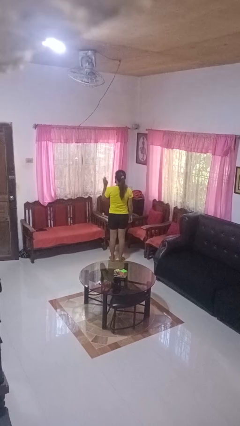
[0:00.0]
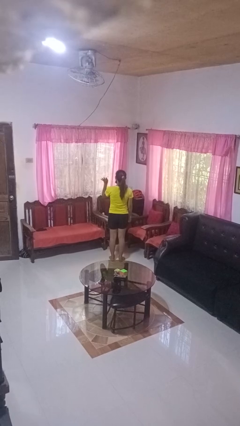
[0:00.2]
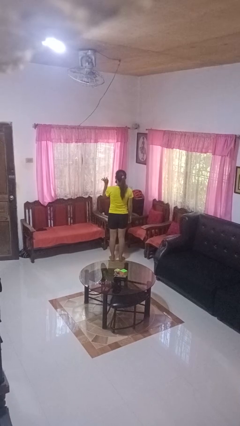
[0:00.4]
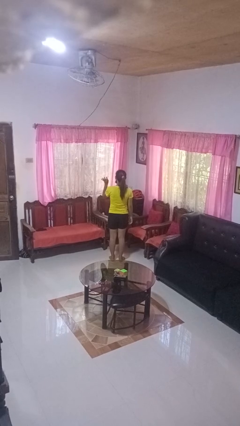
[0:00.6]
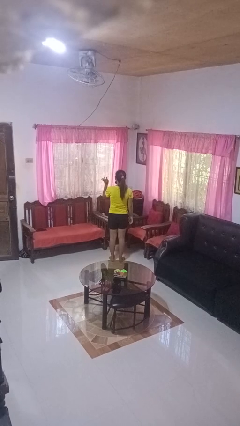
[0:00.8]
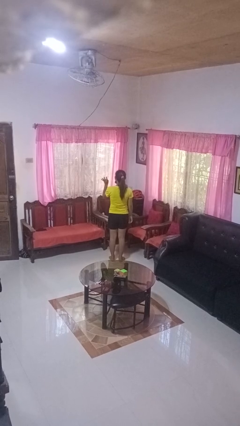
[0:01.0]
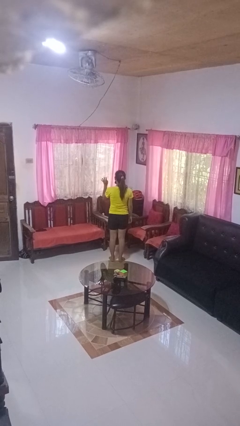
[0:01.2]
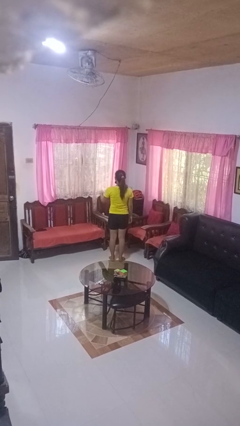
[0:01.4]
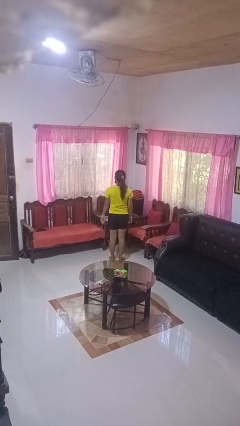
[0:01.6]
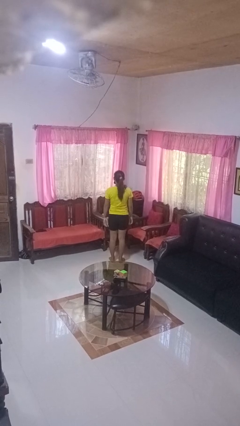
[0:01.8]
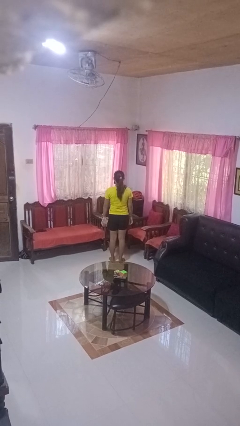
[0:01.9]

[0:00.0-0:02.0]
person gestures number four

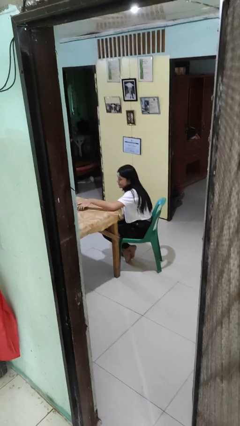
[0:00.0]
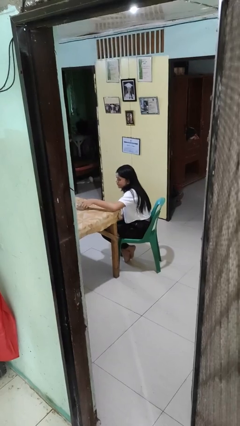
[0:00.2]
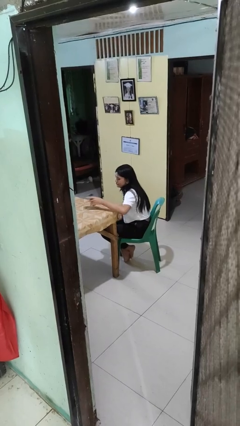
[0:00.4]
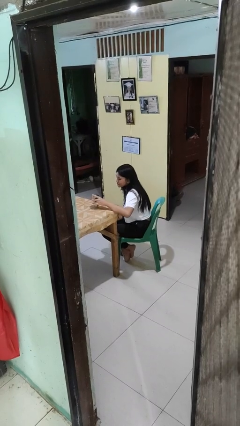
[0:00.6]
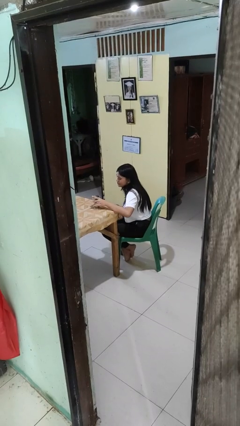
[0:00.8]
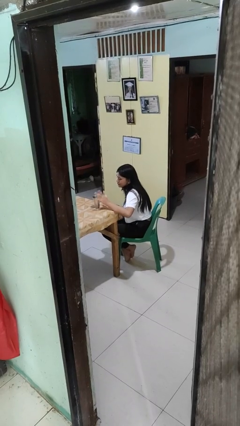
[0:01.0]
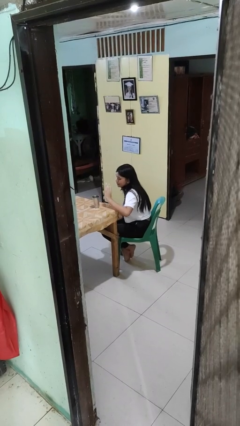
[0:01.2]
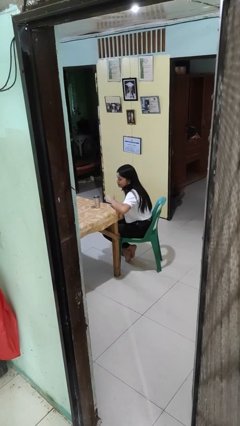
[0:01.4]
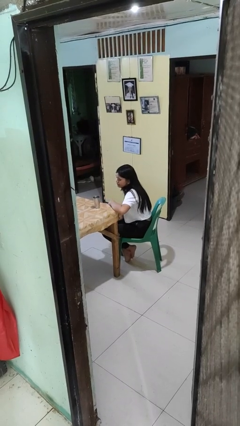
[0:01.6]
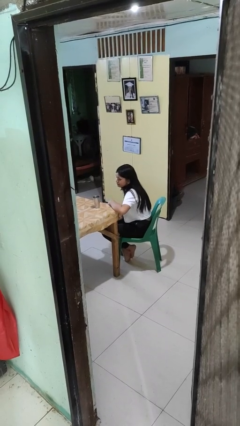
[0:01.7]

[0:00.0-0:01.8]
person sets upright glass

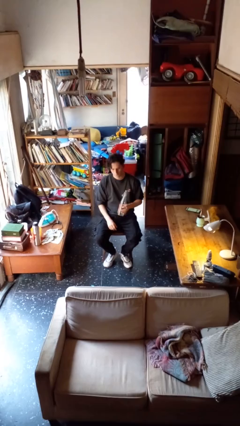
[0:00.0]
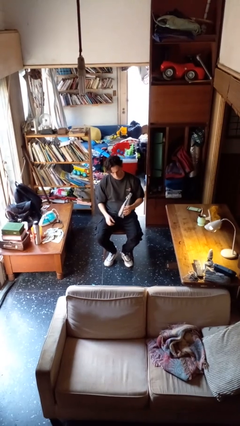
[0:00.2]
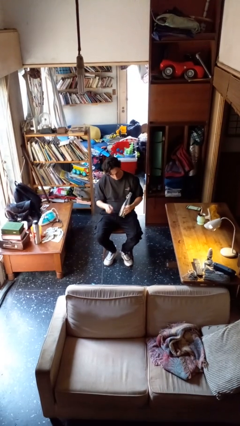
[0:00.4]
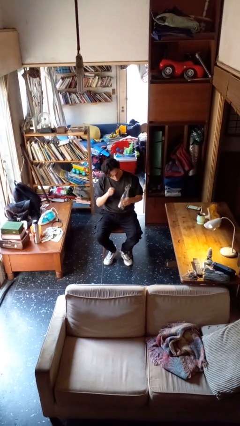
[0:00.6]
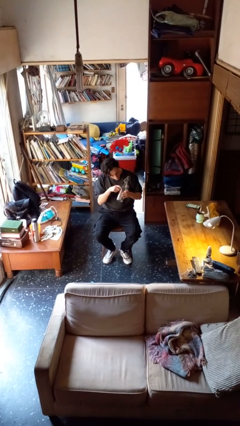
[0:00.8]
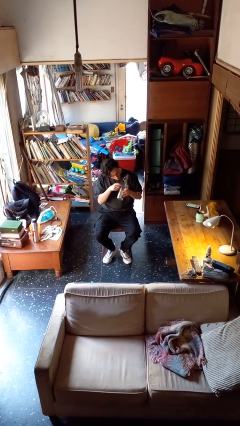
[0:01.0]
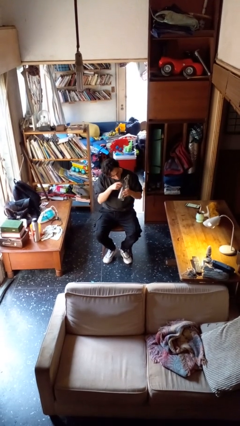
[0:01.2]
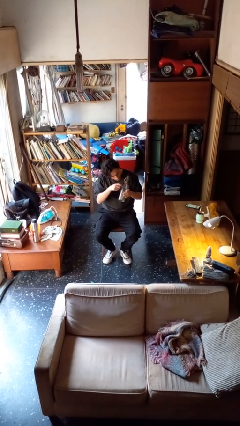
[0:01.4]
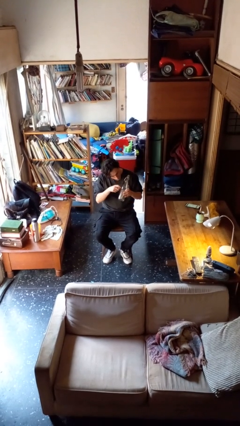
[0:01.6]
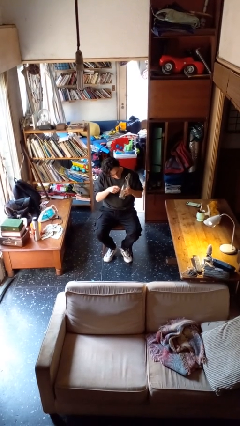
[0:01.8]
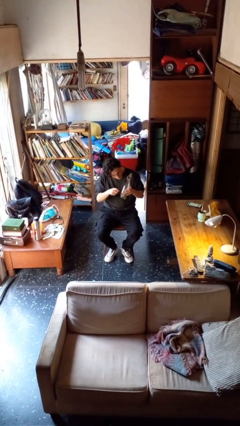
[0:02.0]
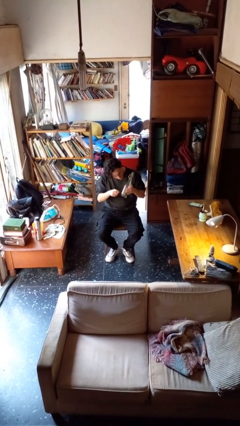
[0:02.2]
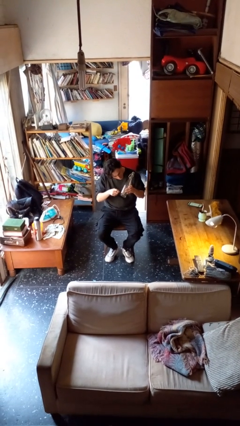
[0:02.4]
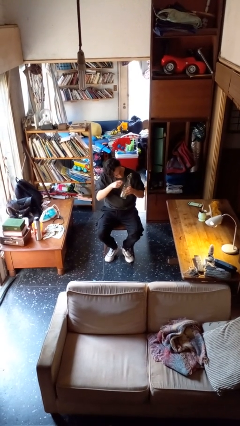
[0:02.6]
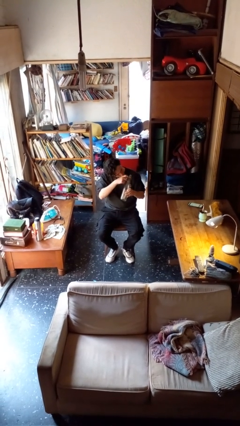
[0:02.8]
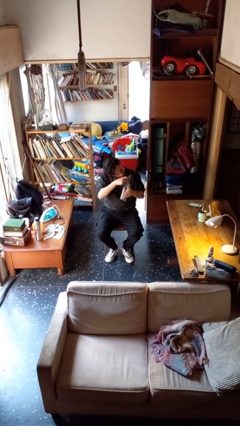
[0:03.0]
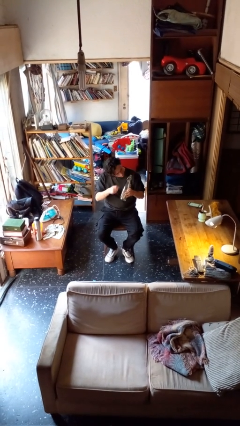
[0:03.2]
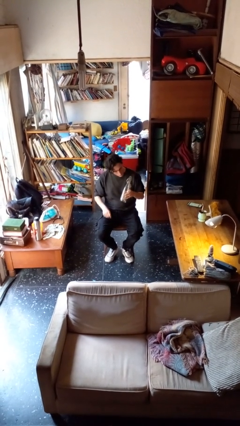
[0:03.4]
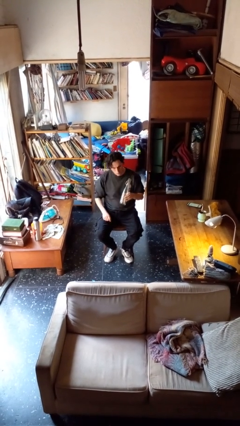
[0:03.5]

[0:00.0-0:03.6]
person taps object with finger

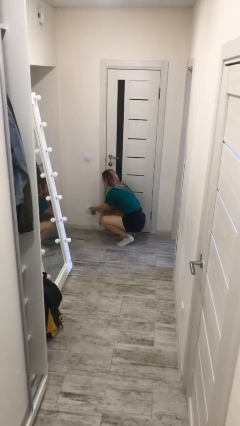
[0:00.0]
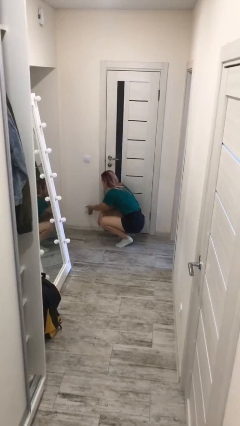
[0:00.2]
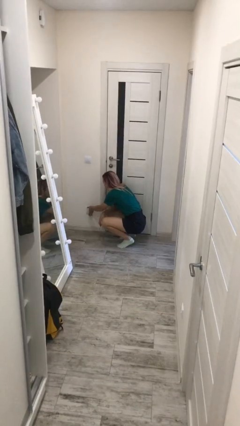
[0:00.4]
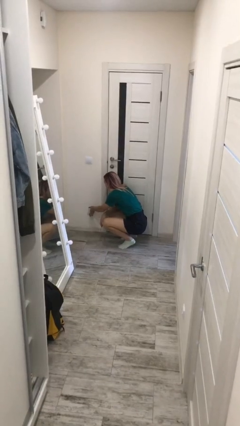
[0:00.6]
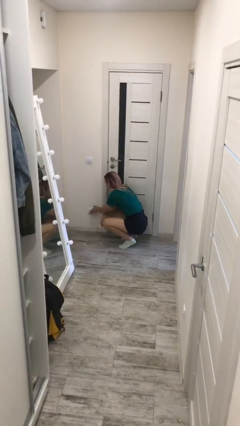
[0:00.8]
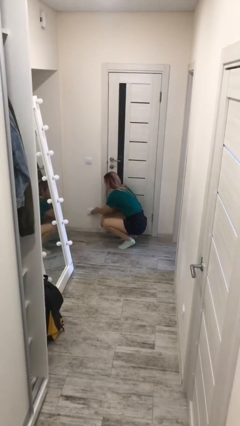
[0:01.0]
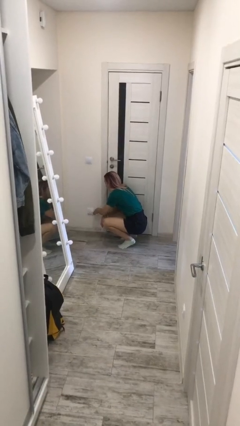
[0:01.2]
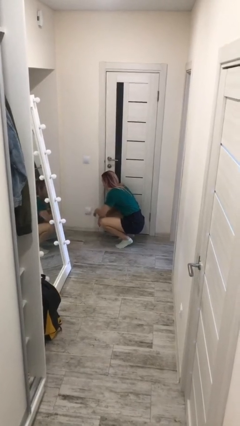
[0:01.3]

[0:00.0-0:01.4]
person adjusts thermostat

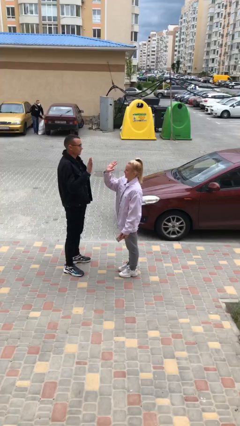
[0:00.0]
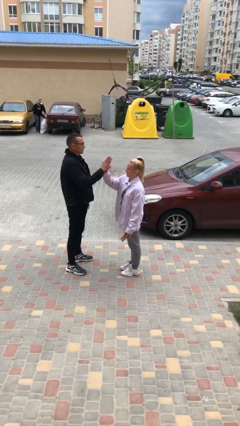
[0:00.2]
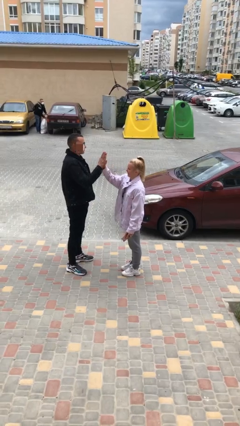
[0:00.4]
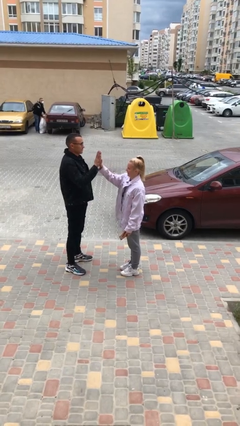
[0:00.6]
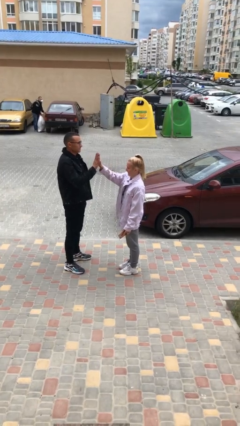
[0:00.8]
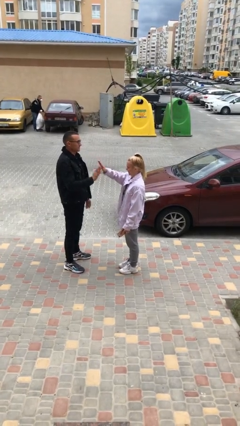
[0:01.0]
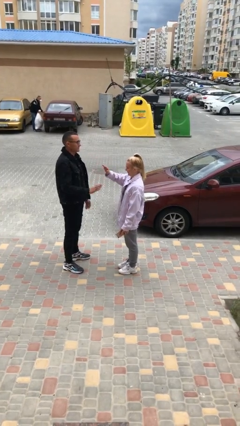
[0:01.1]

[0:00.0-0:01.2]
person highfives hand

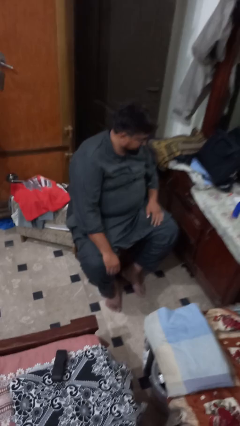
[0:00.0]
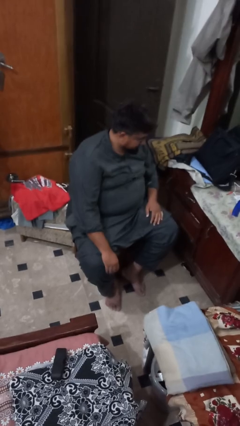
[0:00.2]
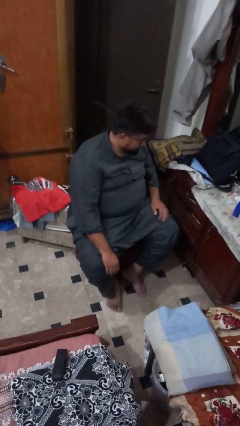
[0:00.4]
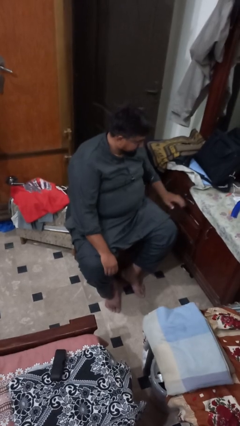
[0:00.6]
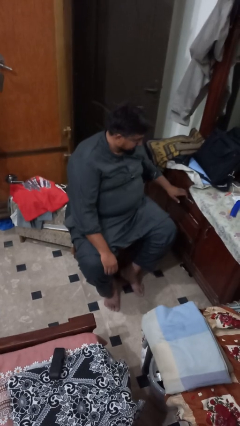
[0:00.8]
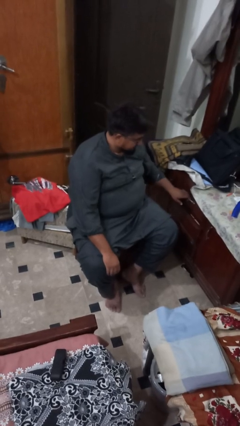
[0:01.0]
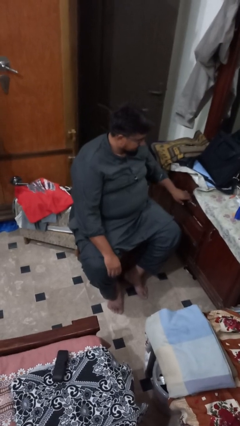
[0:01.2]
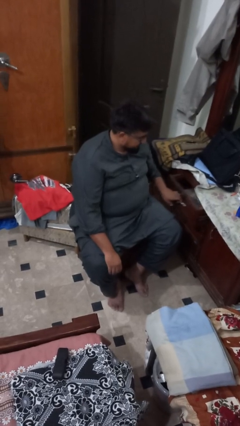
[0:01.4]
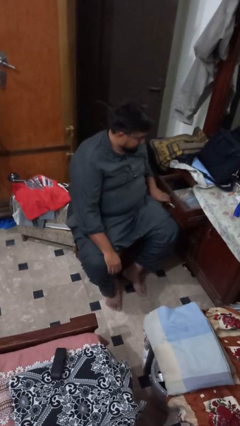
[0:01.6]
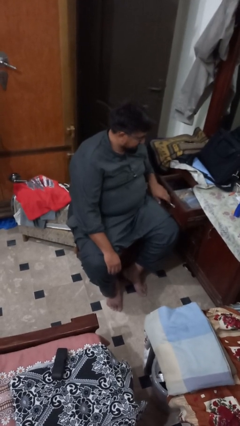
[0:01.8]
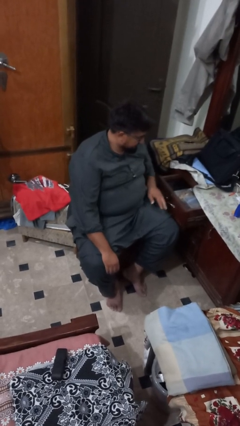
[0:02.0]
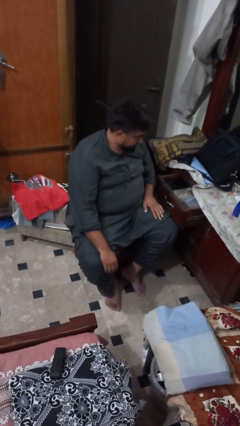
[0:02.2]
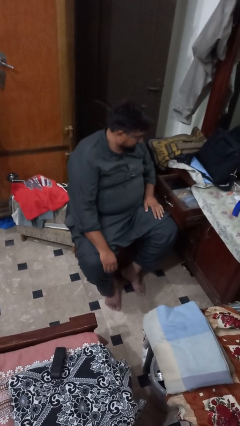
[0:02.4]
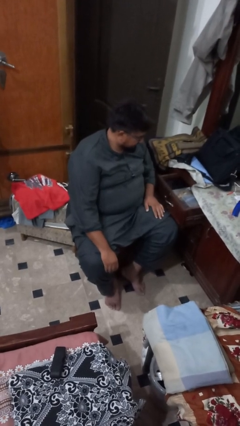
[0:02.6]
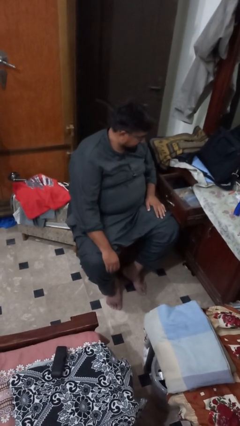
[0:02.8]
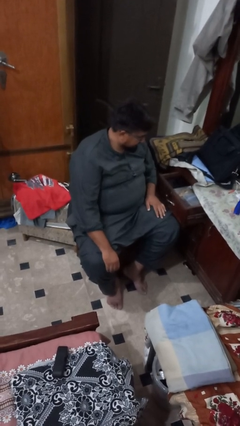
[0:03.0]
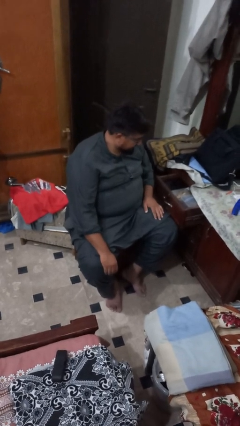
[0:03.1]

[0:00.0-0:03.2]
person opens dresser drawer

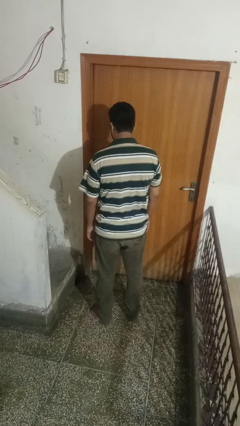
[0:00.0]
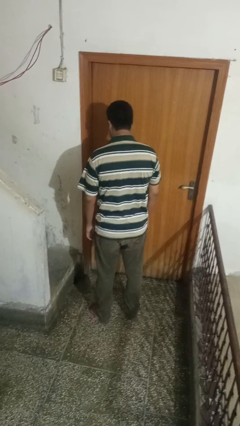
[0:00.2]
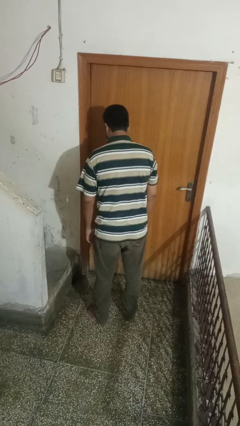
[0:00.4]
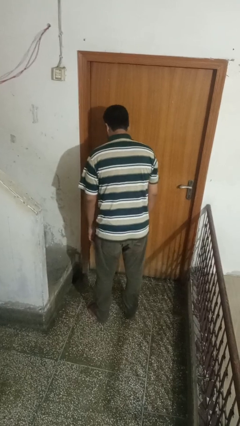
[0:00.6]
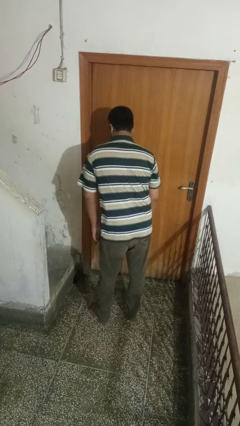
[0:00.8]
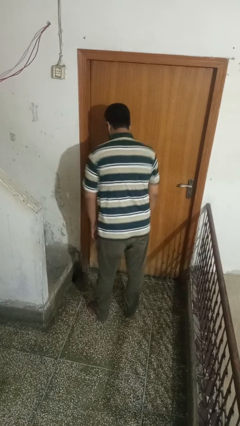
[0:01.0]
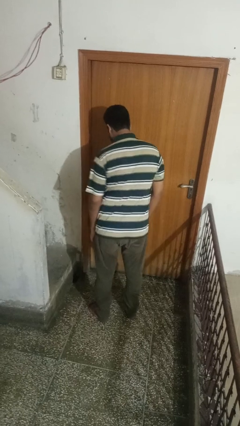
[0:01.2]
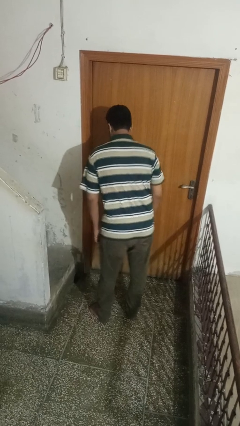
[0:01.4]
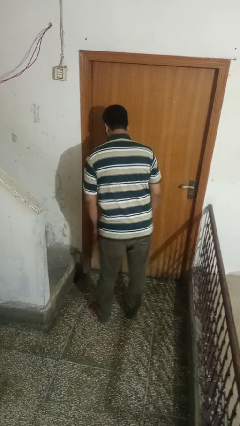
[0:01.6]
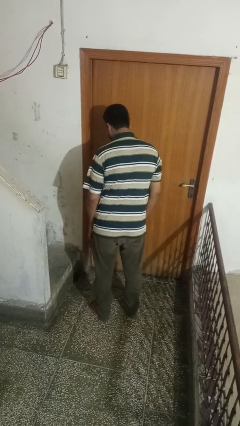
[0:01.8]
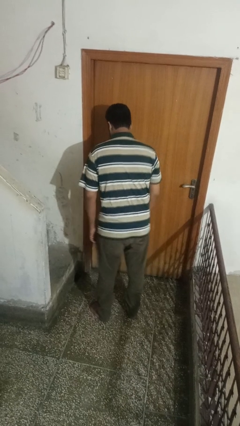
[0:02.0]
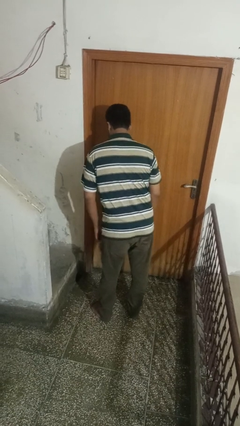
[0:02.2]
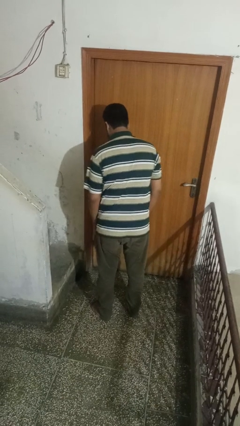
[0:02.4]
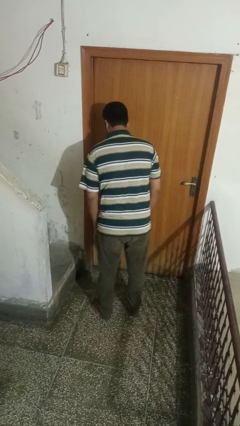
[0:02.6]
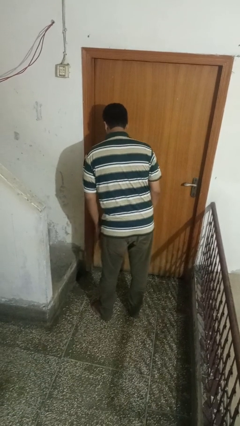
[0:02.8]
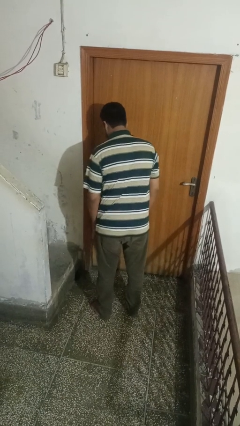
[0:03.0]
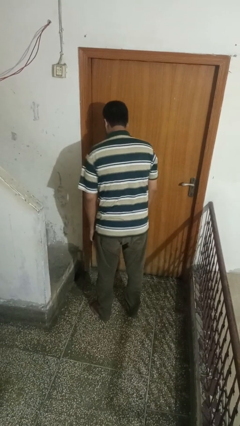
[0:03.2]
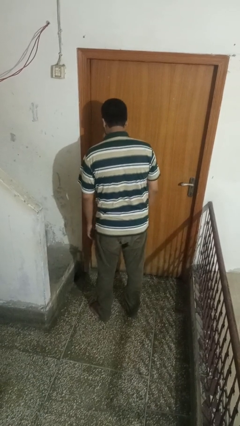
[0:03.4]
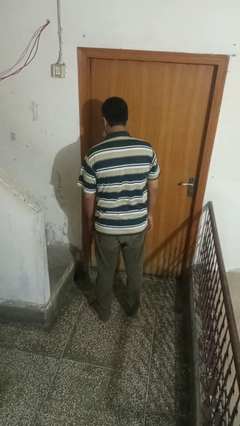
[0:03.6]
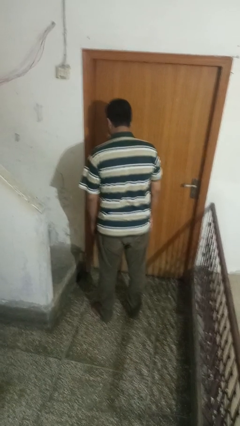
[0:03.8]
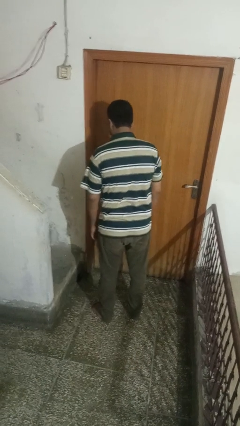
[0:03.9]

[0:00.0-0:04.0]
person wiggles hips
